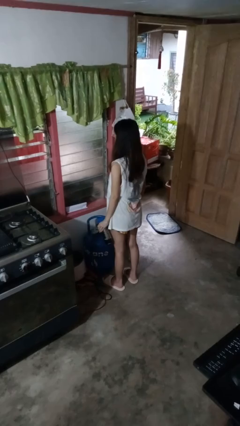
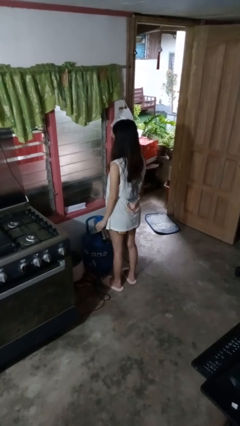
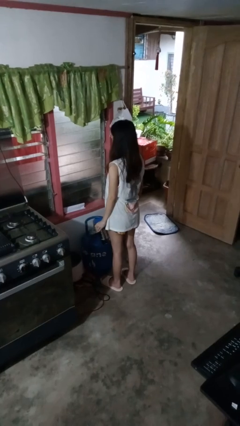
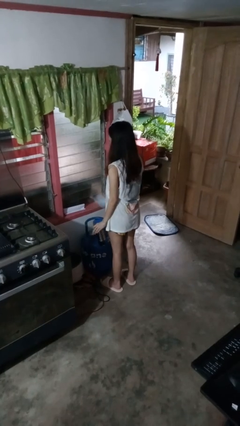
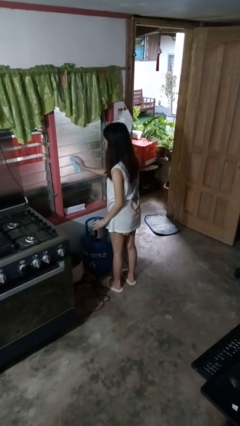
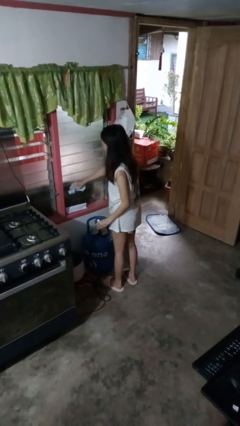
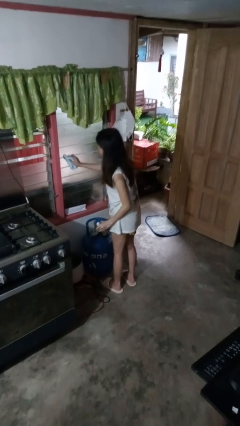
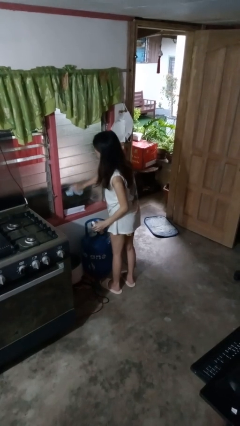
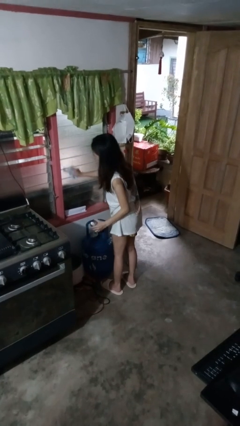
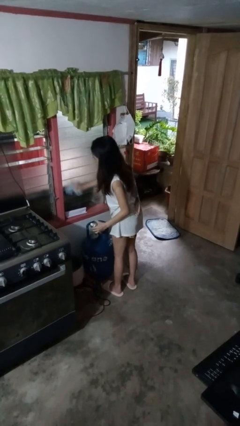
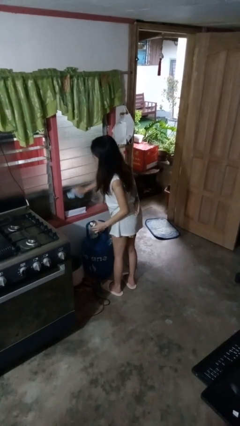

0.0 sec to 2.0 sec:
person washes window

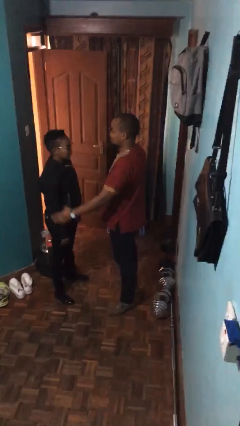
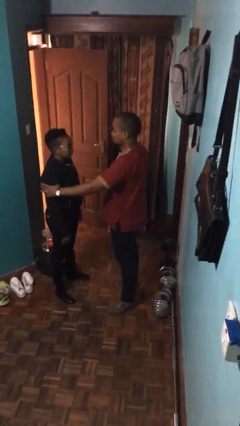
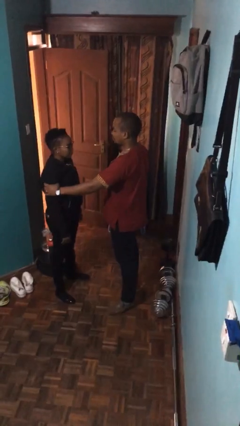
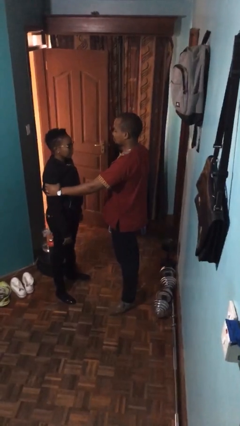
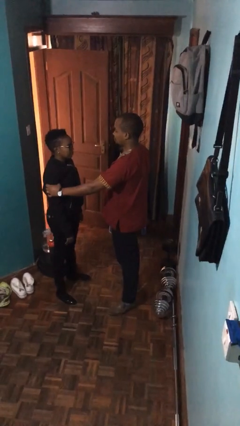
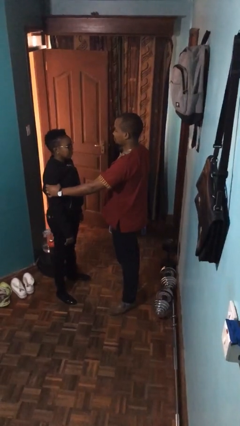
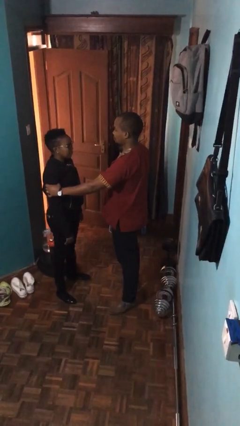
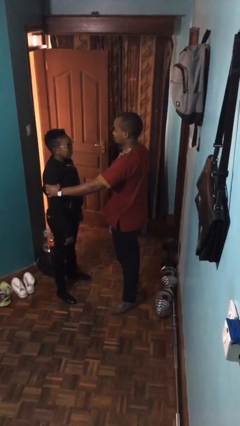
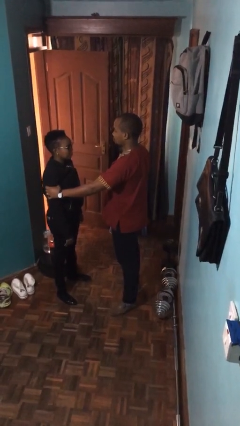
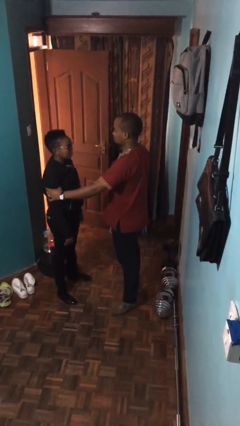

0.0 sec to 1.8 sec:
person grabs person by bicep

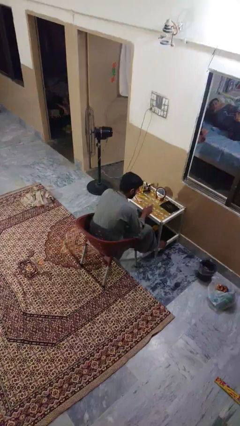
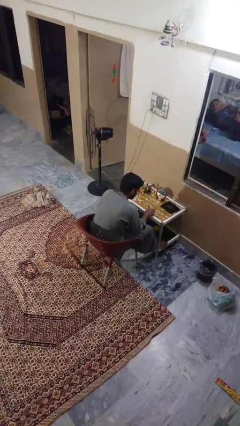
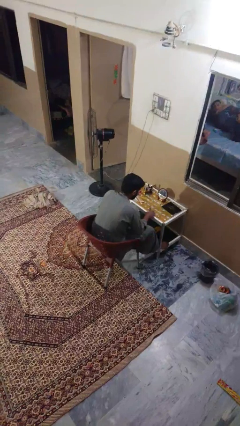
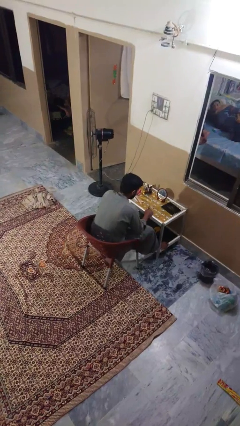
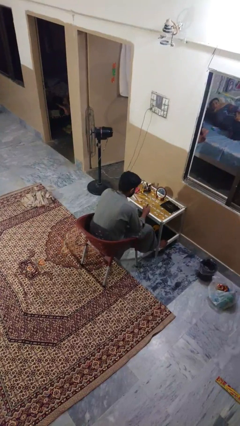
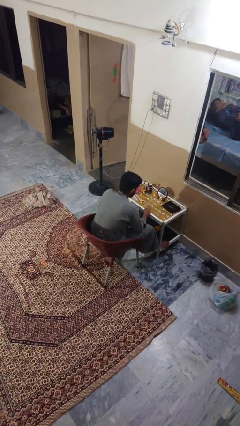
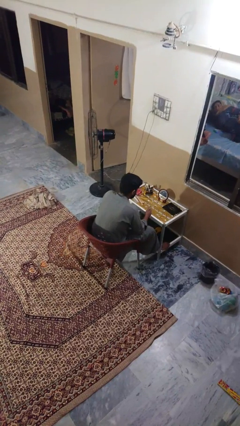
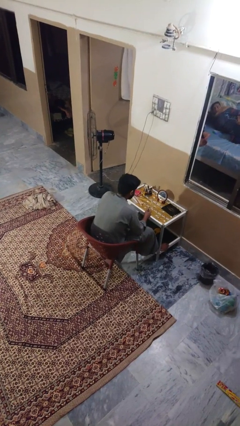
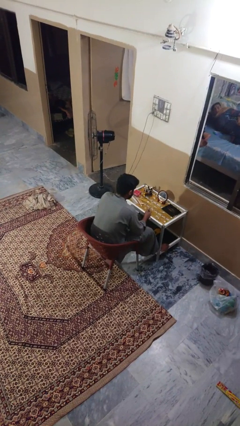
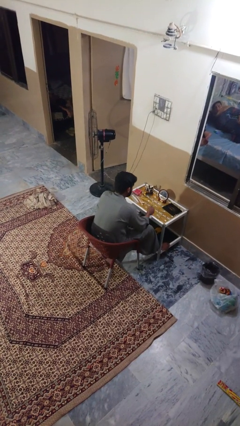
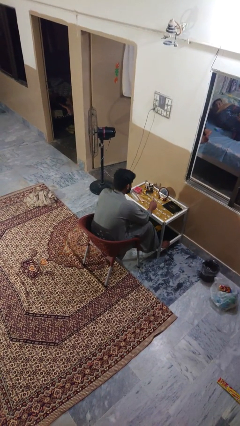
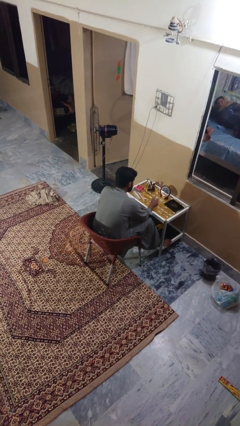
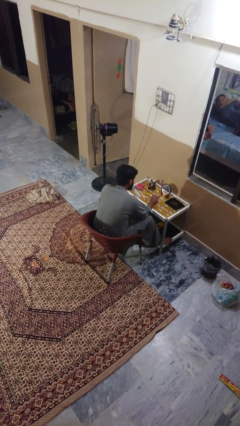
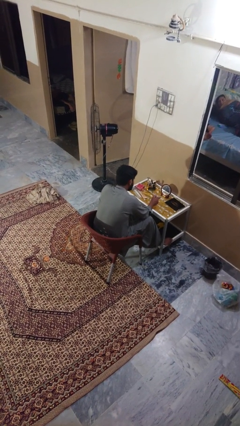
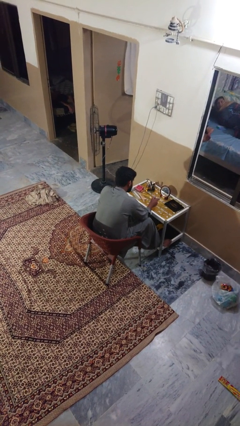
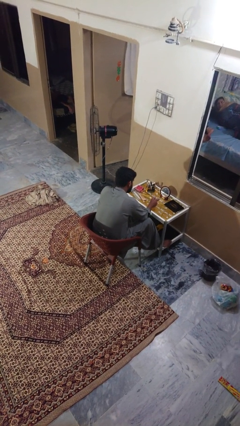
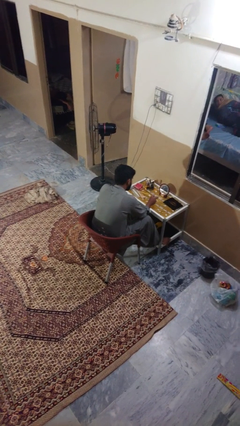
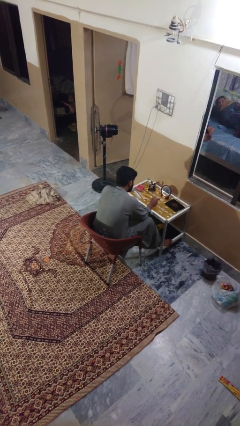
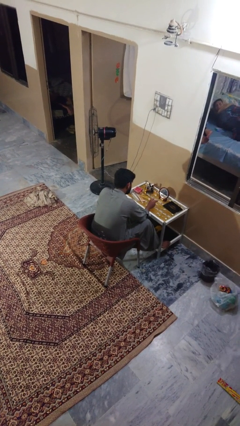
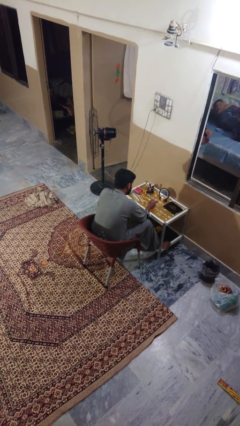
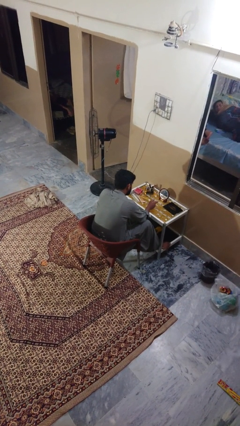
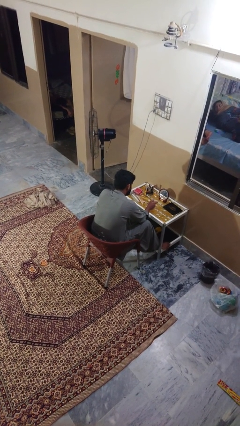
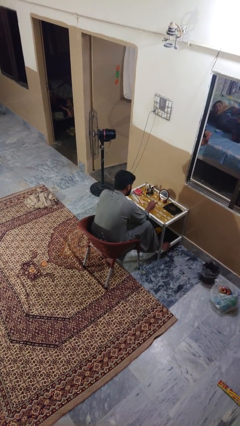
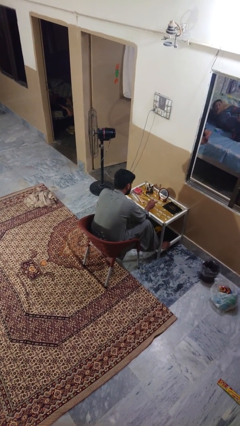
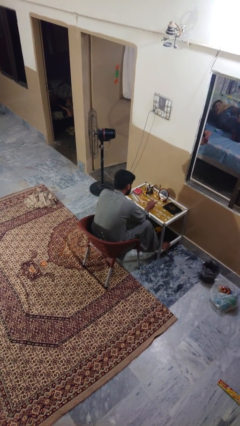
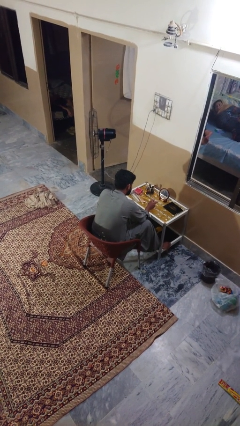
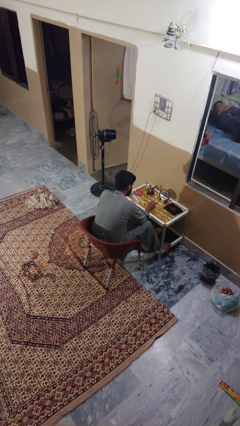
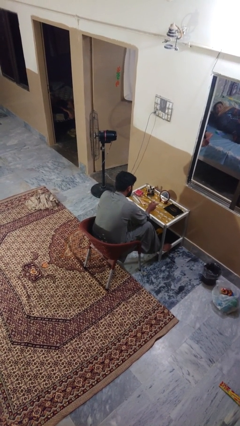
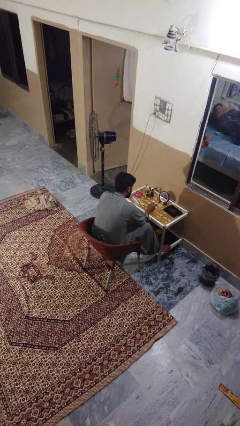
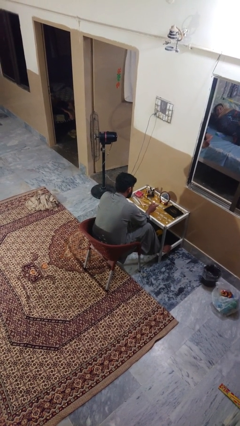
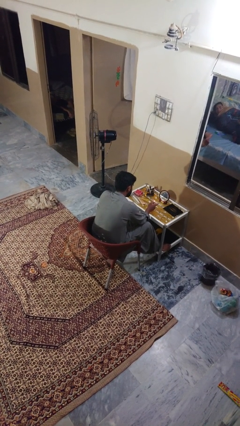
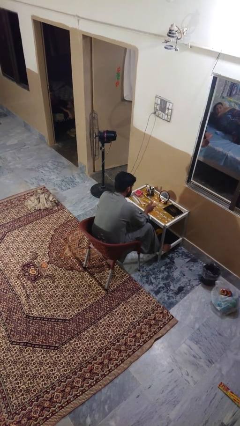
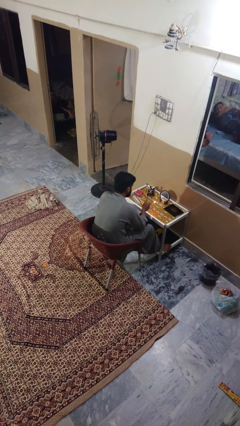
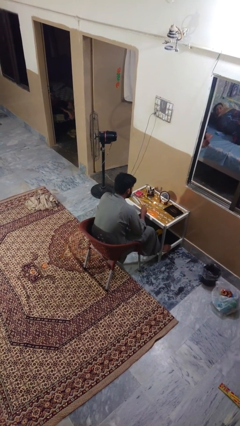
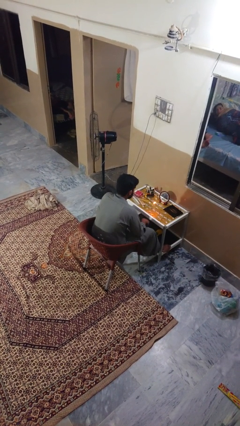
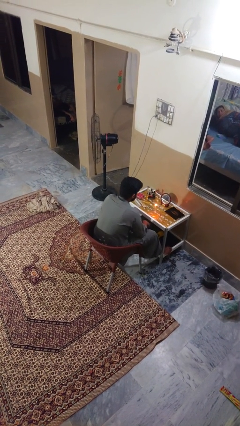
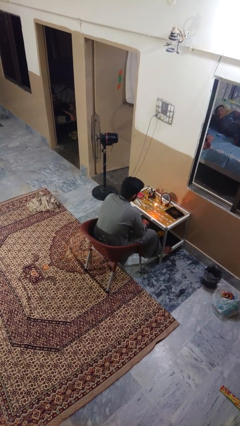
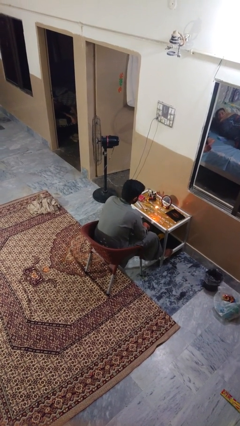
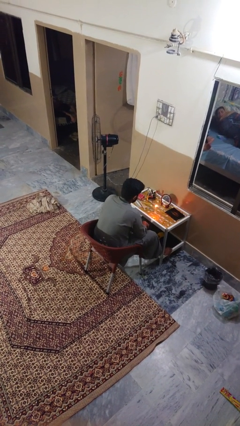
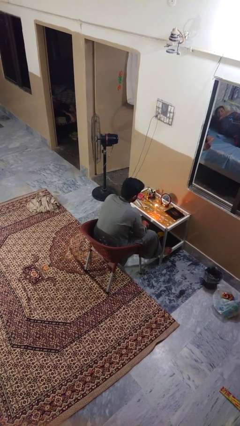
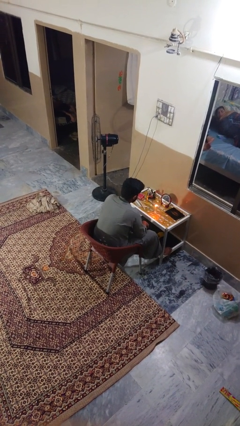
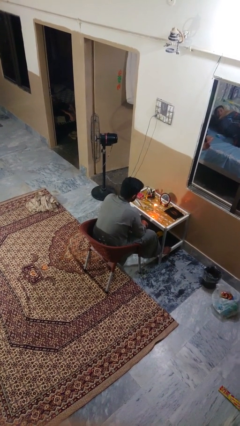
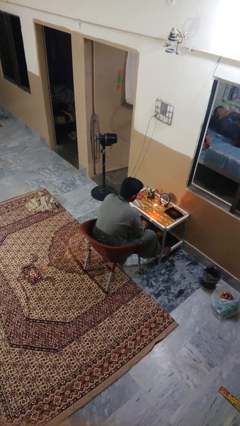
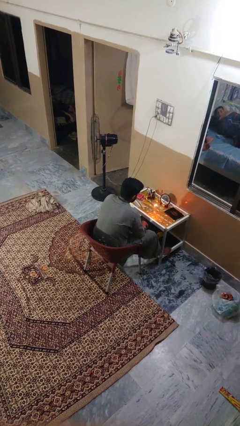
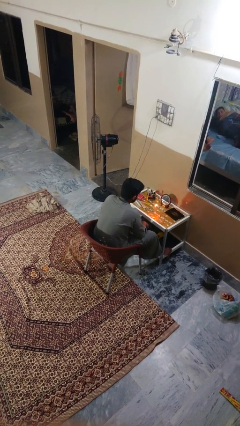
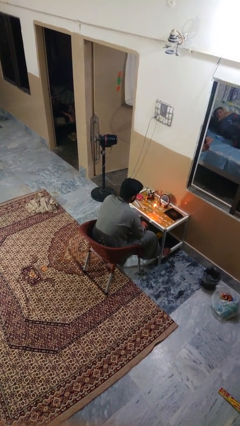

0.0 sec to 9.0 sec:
person lights candle

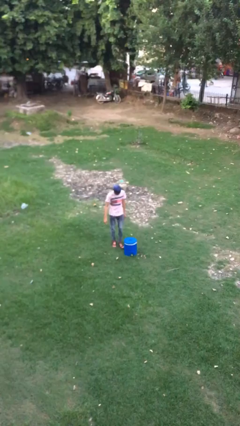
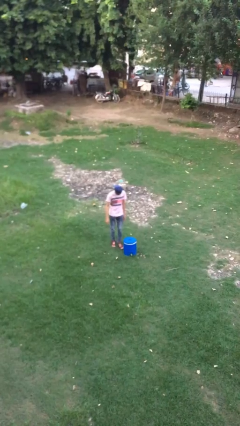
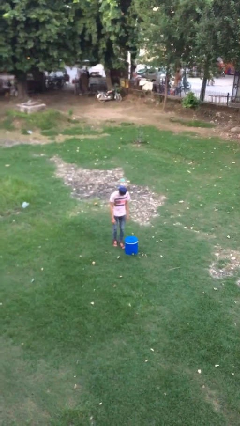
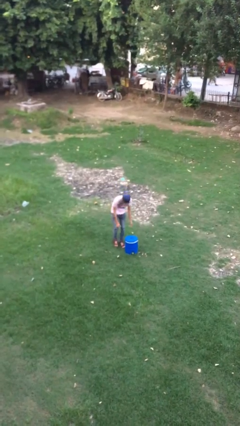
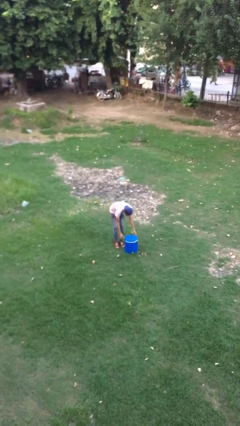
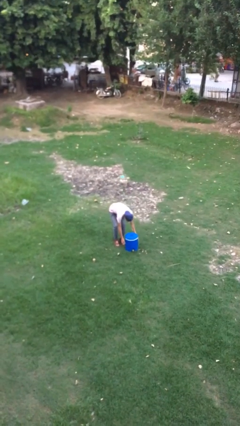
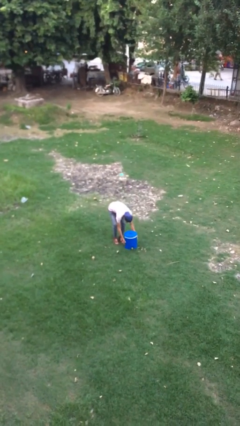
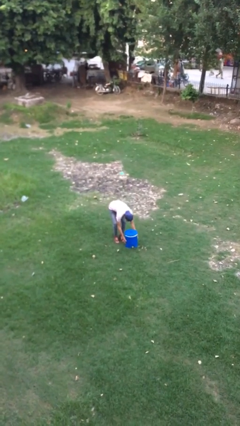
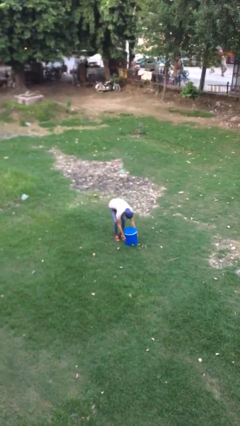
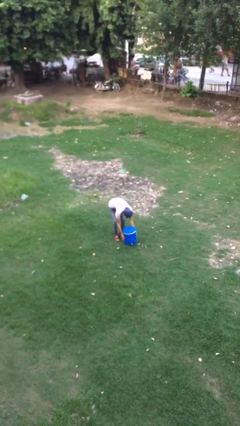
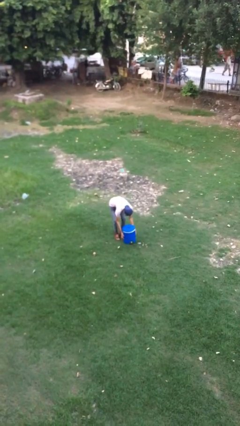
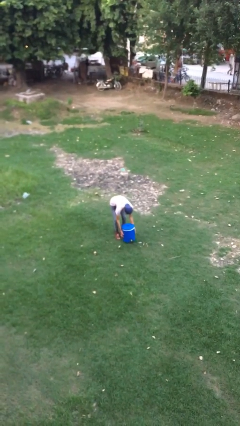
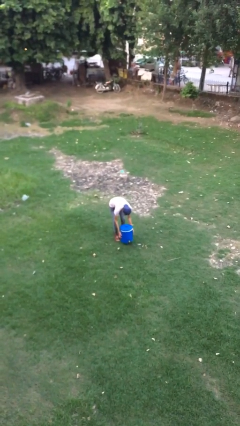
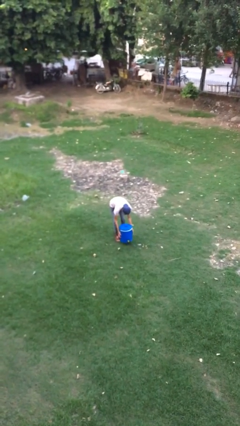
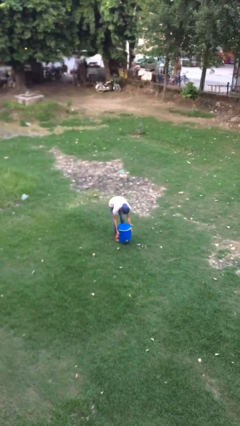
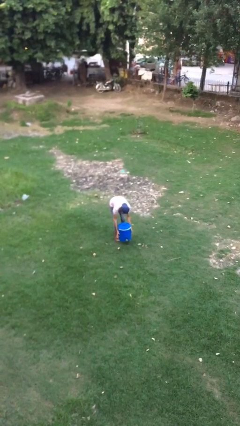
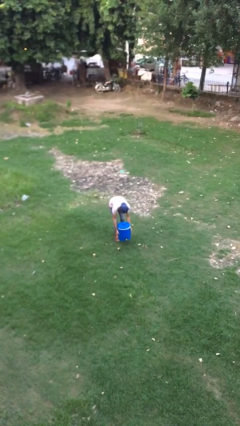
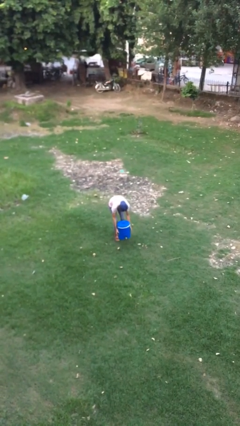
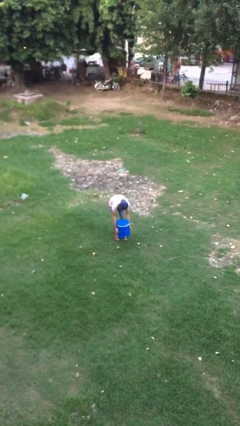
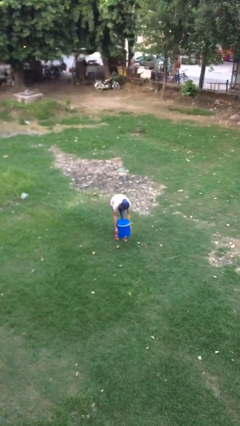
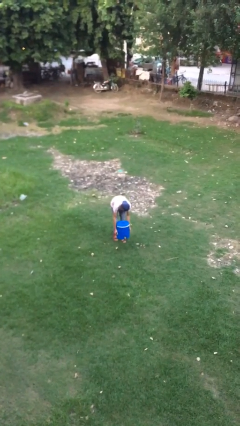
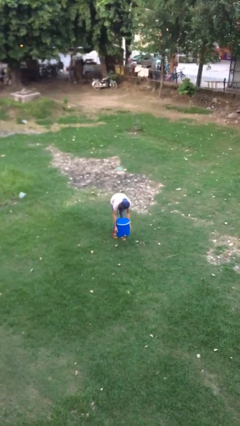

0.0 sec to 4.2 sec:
person picks up object from floor

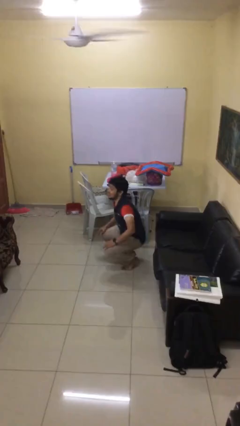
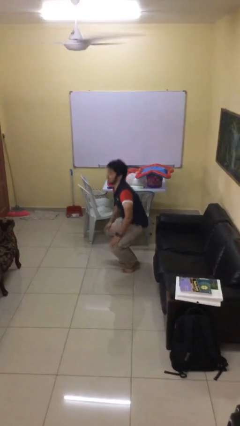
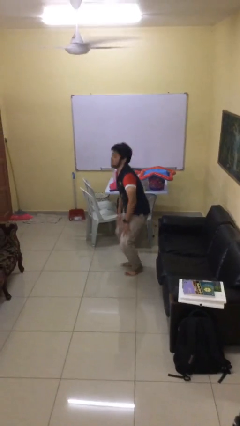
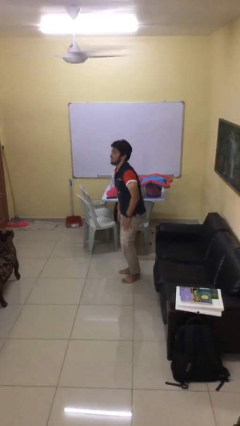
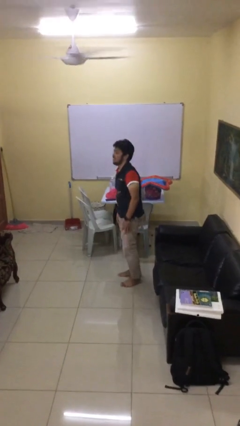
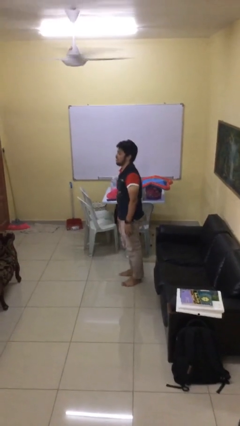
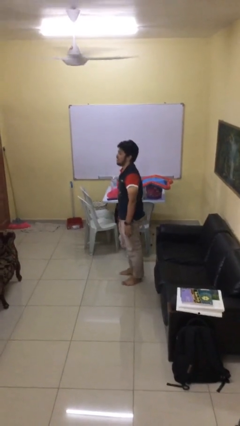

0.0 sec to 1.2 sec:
person stands up
